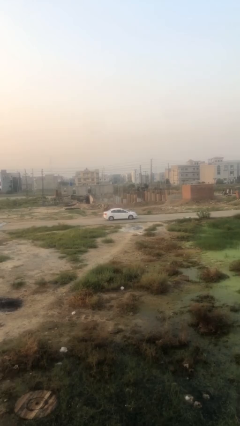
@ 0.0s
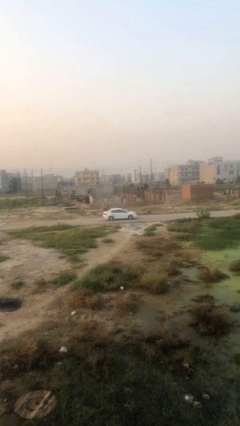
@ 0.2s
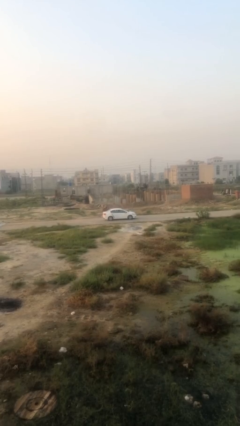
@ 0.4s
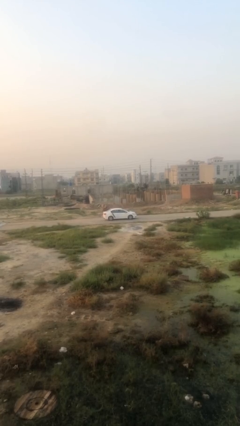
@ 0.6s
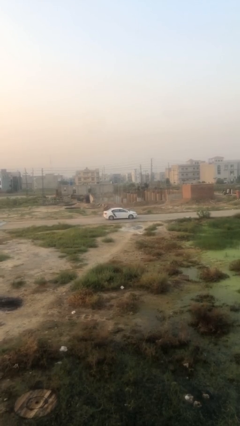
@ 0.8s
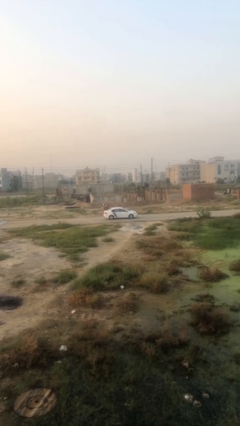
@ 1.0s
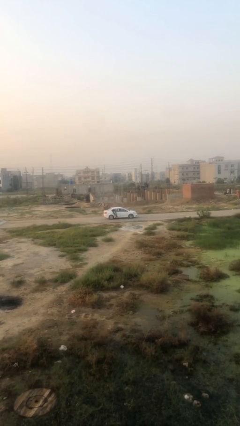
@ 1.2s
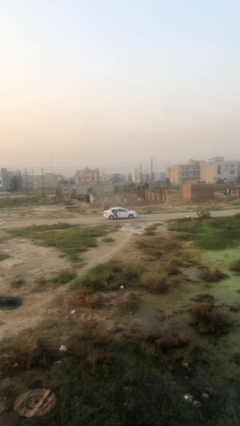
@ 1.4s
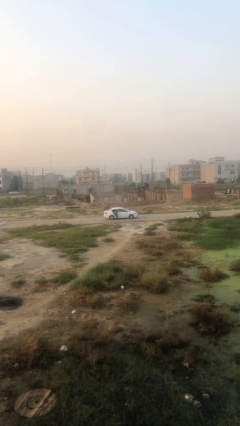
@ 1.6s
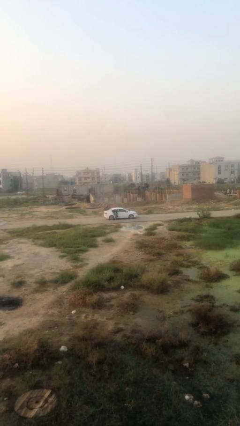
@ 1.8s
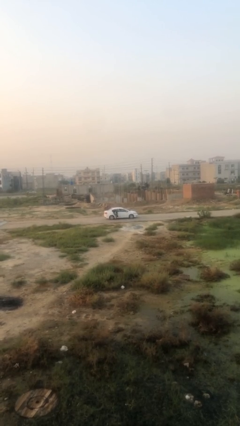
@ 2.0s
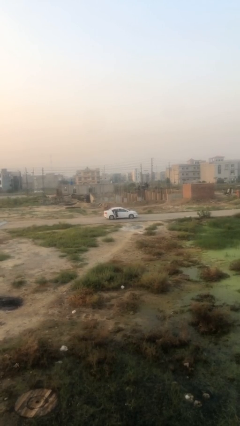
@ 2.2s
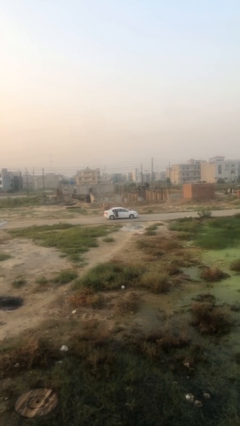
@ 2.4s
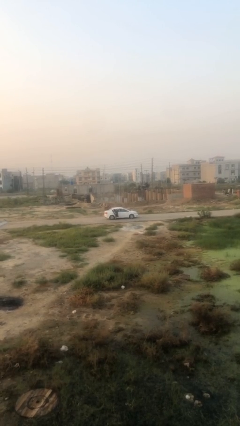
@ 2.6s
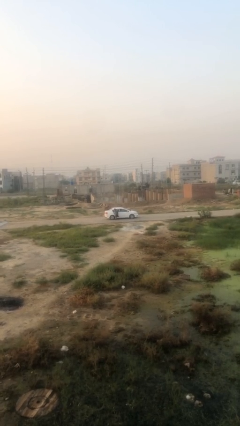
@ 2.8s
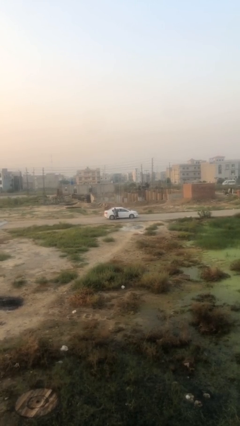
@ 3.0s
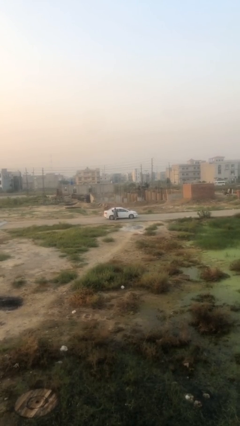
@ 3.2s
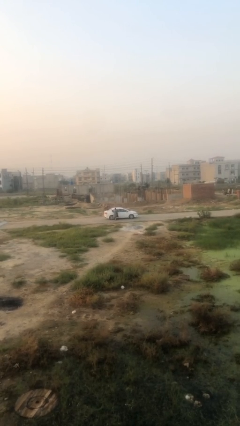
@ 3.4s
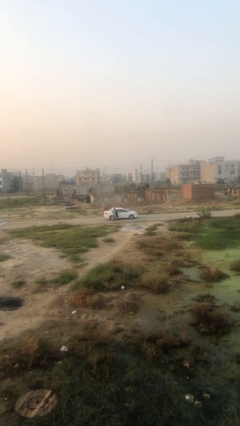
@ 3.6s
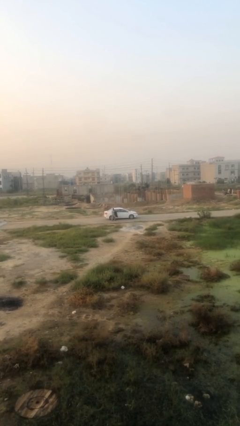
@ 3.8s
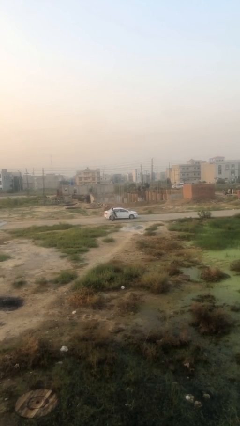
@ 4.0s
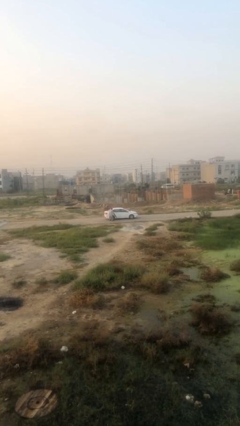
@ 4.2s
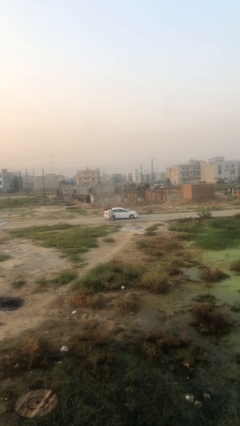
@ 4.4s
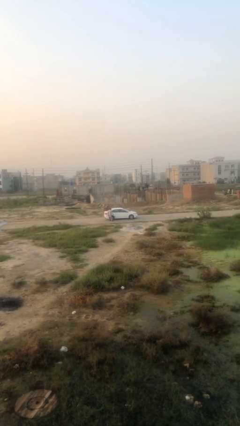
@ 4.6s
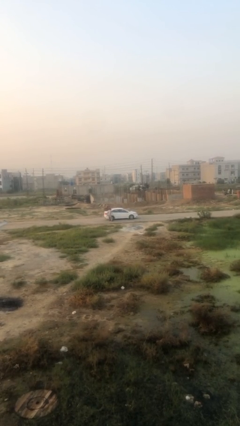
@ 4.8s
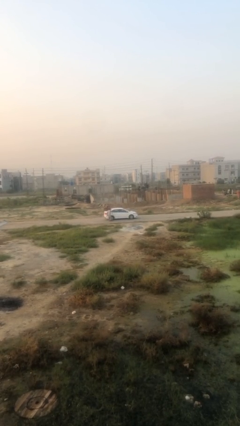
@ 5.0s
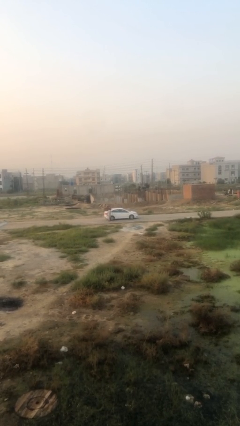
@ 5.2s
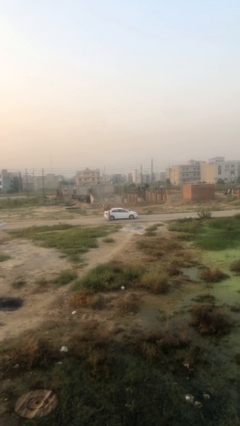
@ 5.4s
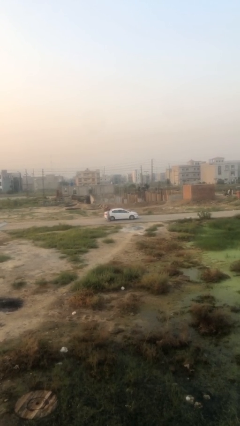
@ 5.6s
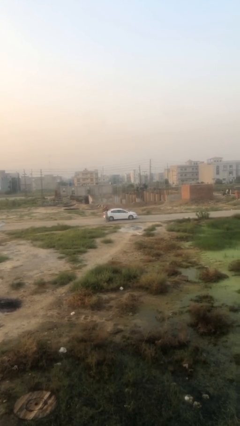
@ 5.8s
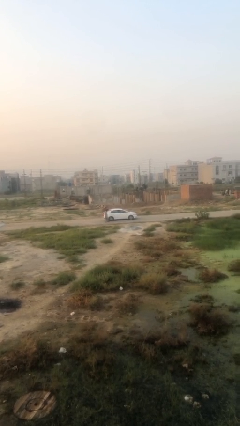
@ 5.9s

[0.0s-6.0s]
car drops off person

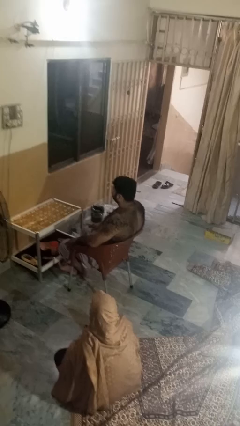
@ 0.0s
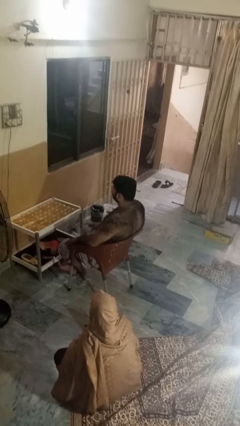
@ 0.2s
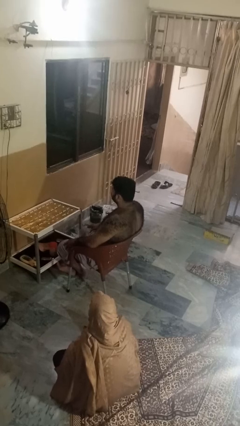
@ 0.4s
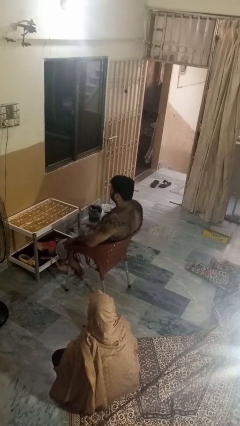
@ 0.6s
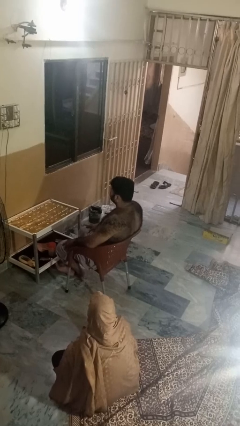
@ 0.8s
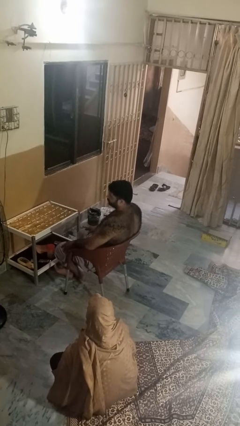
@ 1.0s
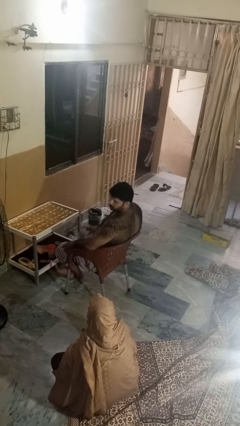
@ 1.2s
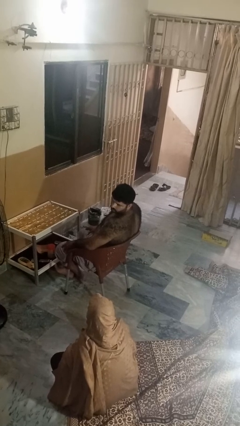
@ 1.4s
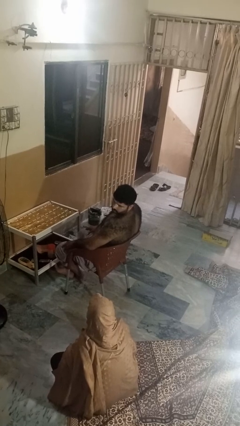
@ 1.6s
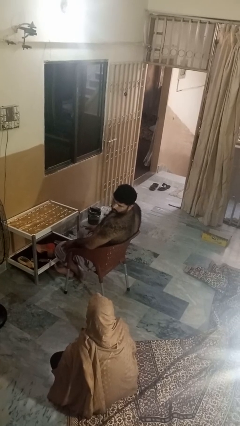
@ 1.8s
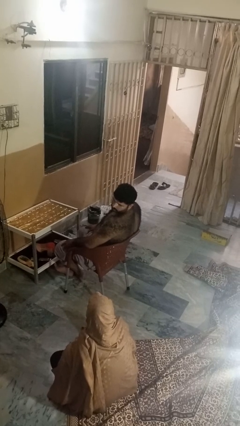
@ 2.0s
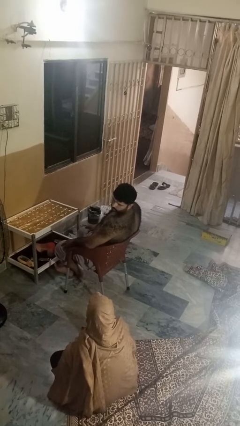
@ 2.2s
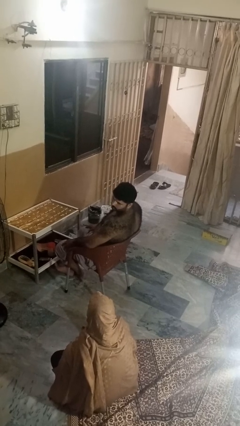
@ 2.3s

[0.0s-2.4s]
person looks over shoulder

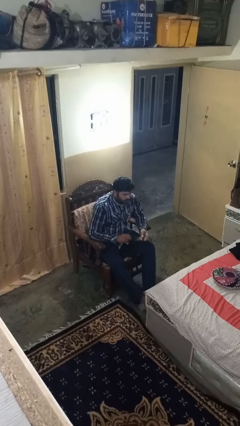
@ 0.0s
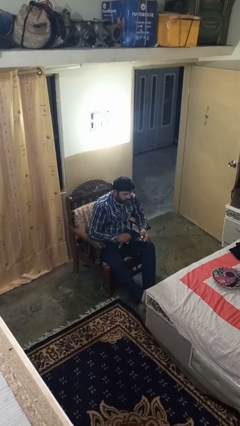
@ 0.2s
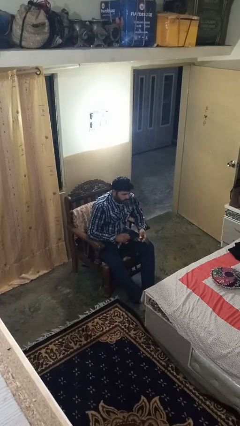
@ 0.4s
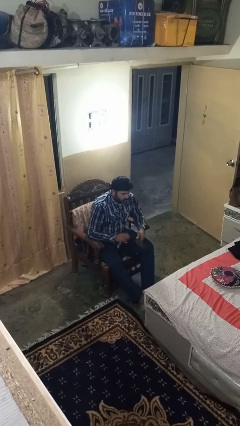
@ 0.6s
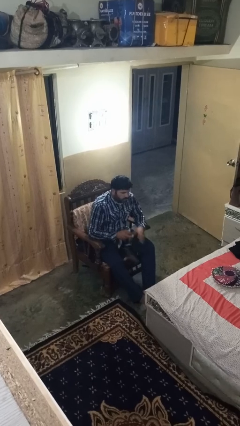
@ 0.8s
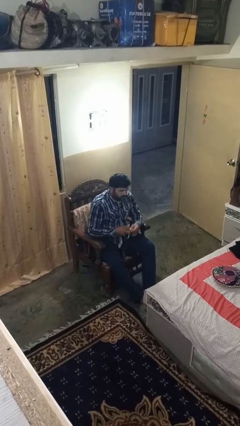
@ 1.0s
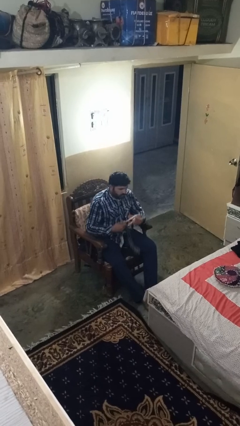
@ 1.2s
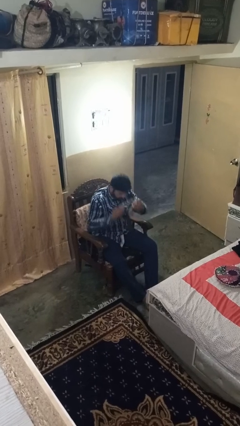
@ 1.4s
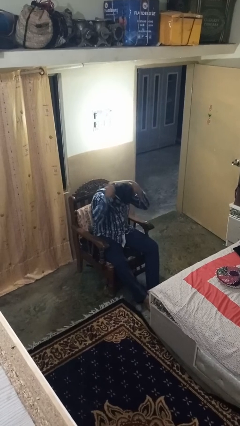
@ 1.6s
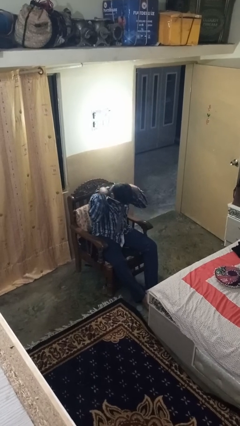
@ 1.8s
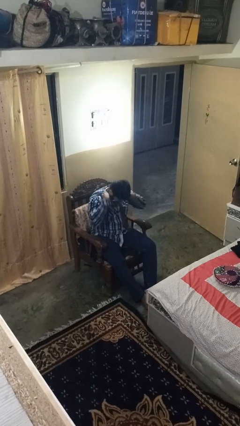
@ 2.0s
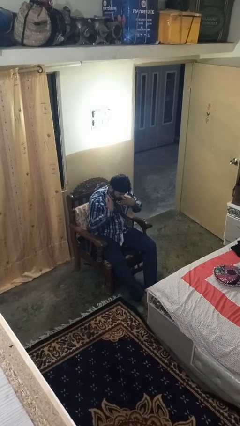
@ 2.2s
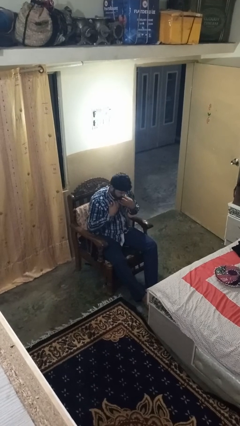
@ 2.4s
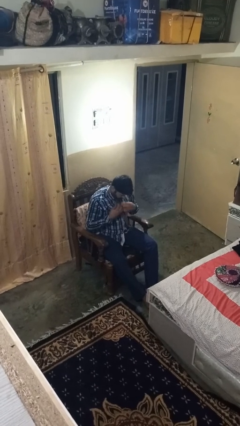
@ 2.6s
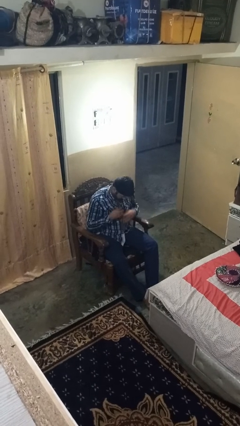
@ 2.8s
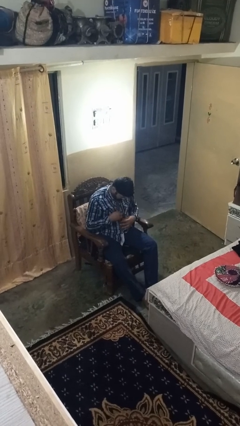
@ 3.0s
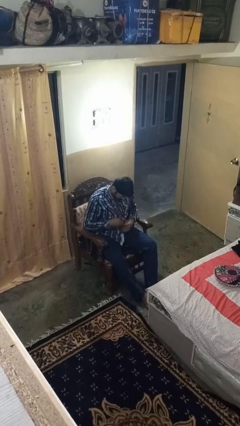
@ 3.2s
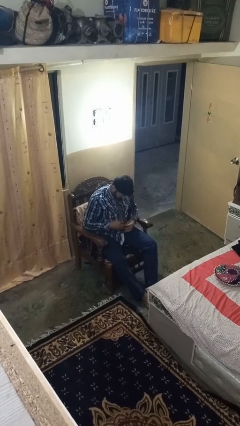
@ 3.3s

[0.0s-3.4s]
person puts on necktie

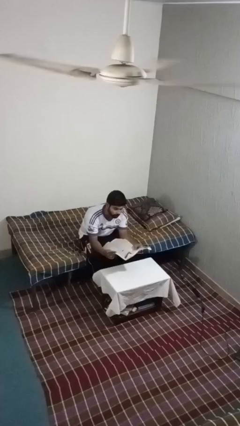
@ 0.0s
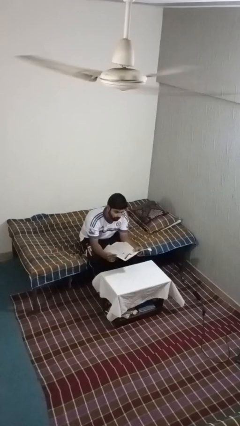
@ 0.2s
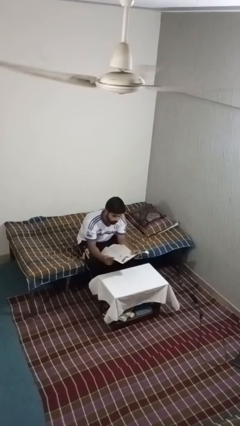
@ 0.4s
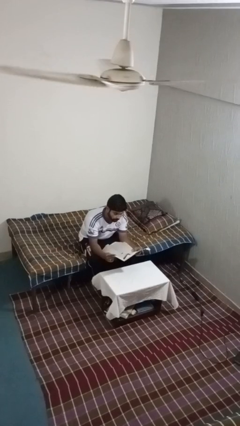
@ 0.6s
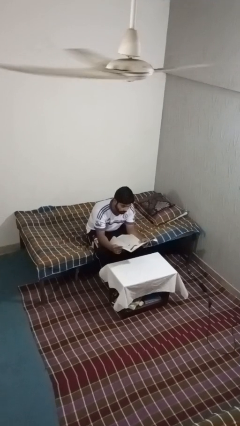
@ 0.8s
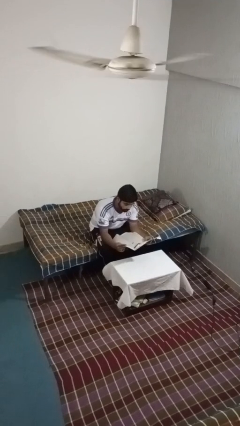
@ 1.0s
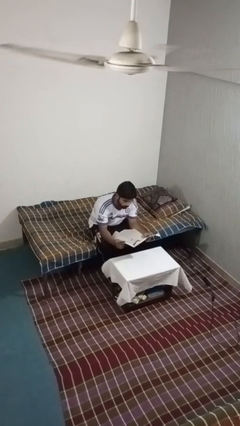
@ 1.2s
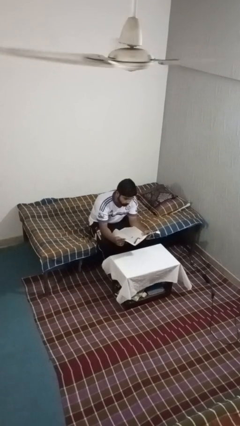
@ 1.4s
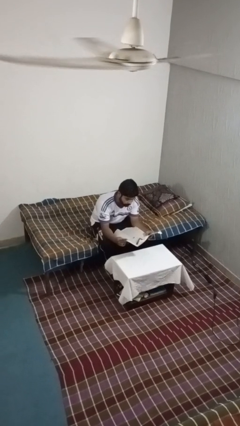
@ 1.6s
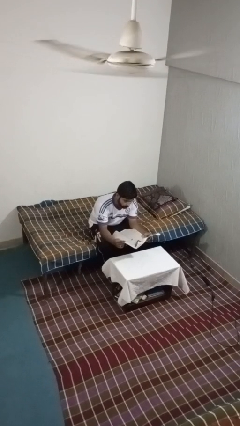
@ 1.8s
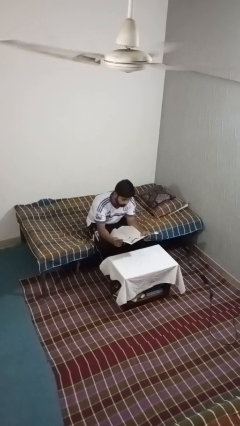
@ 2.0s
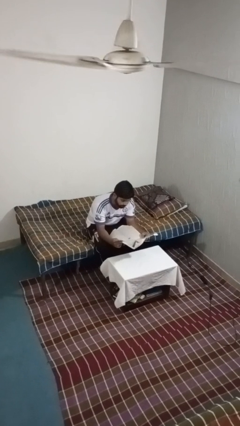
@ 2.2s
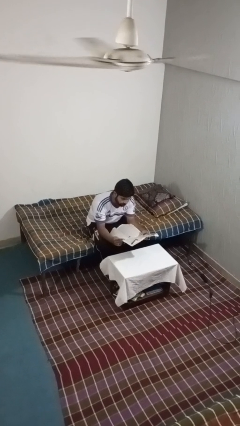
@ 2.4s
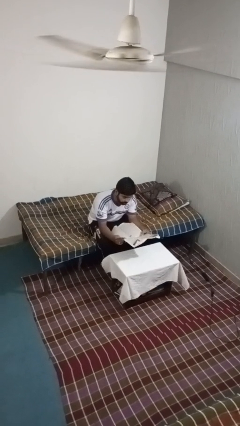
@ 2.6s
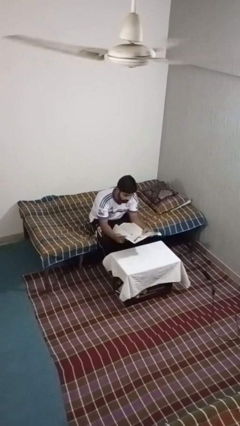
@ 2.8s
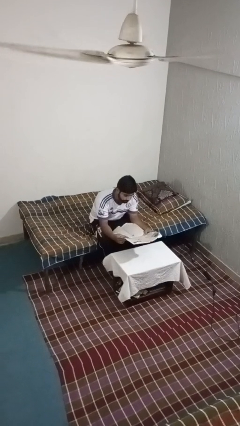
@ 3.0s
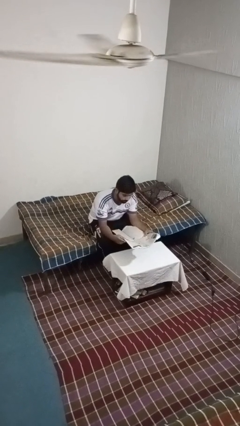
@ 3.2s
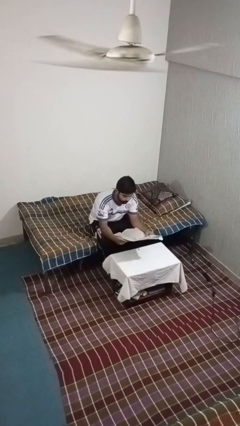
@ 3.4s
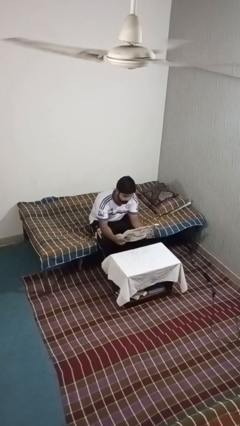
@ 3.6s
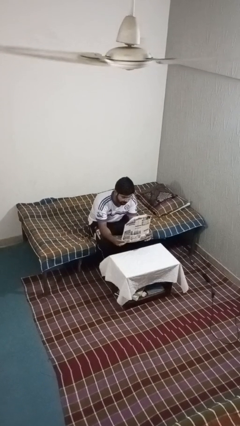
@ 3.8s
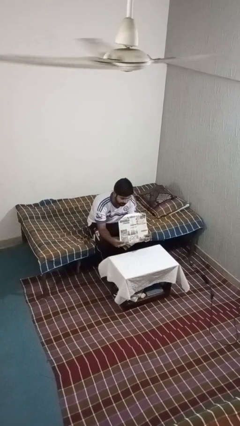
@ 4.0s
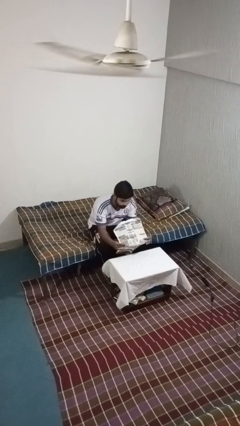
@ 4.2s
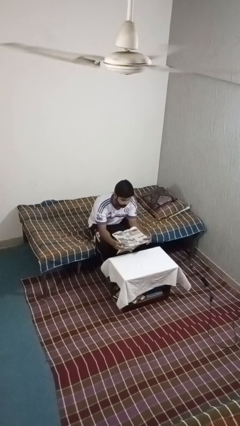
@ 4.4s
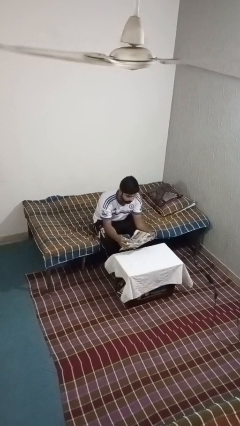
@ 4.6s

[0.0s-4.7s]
person reads newspaper

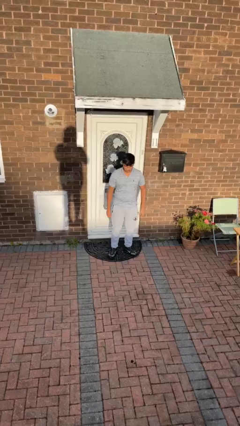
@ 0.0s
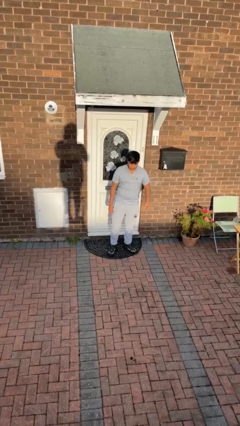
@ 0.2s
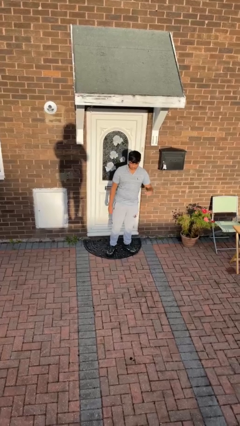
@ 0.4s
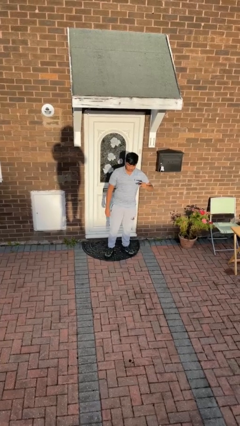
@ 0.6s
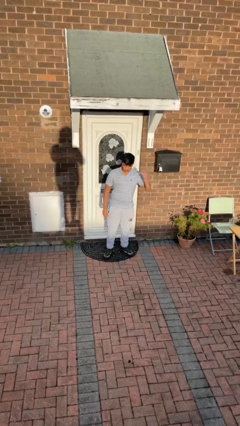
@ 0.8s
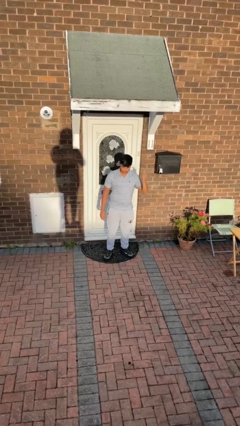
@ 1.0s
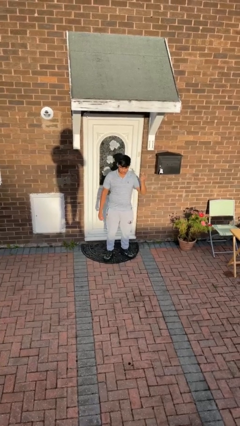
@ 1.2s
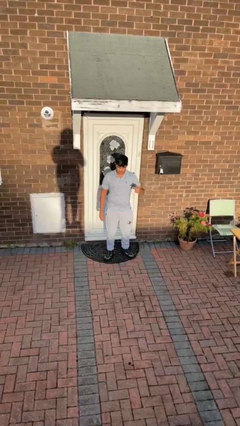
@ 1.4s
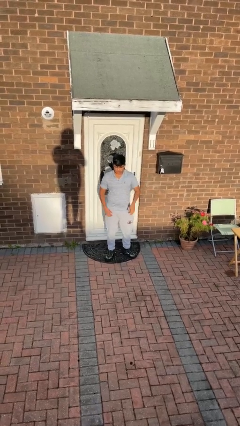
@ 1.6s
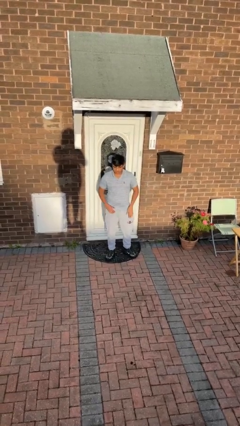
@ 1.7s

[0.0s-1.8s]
person snaps fingers
